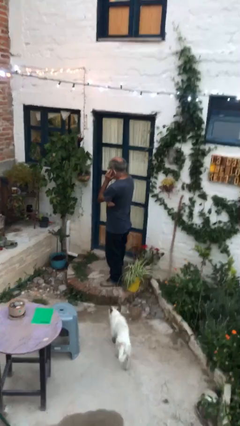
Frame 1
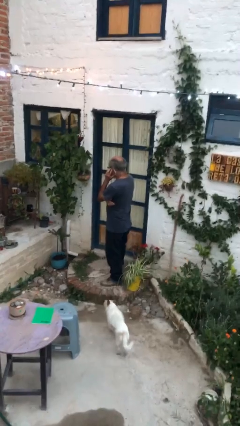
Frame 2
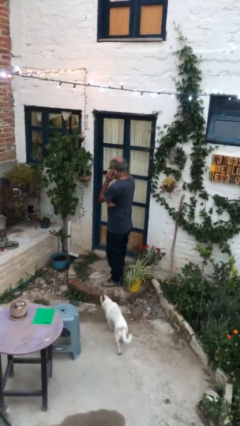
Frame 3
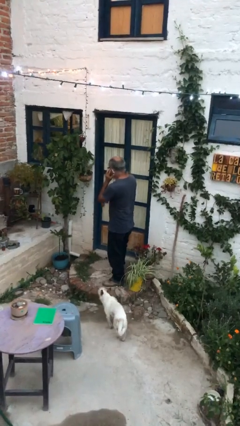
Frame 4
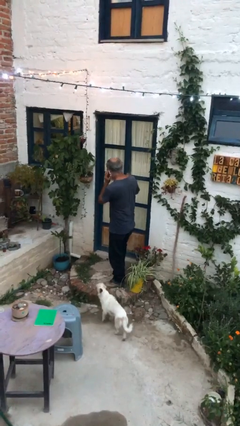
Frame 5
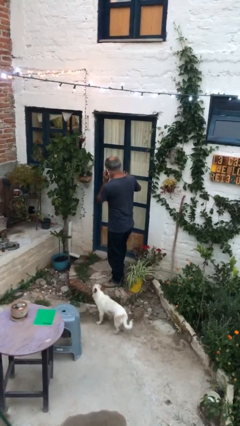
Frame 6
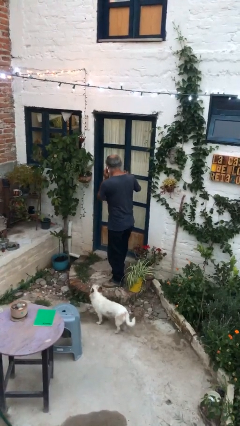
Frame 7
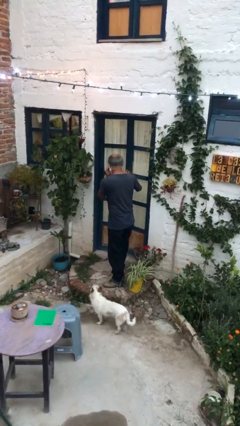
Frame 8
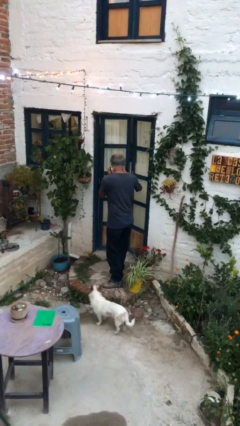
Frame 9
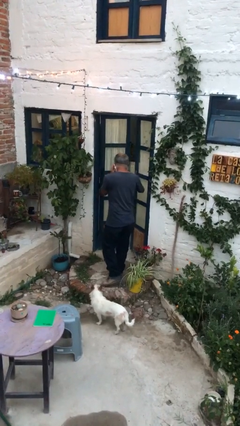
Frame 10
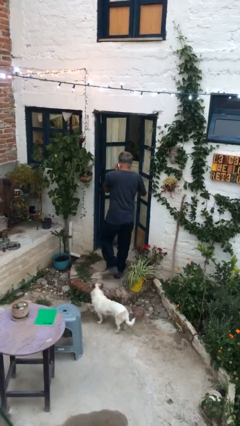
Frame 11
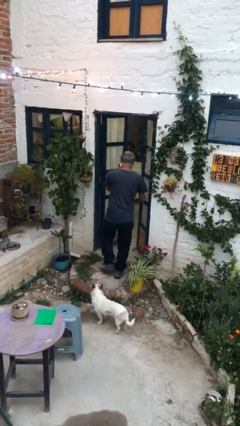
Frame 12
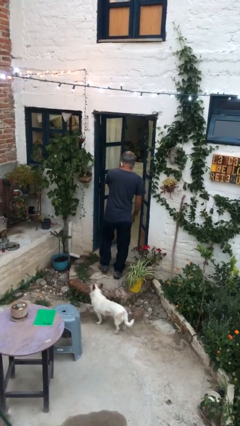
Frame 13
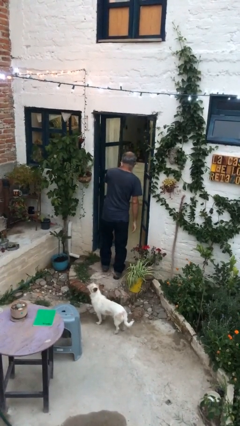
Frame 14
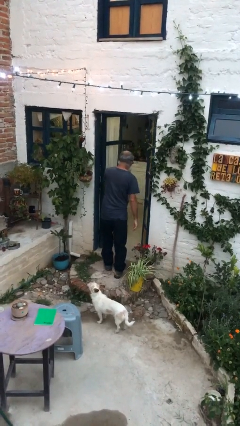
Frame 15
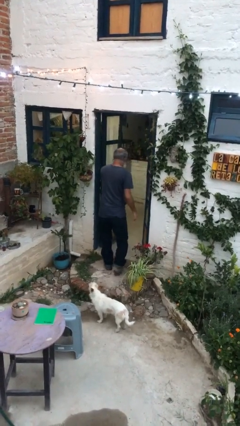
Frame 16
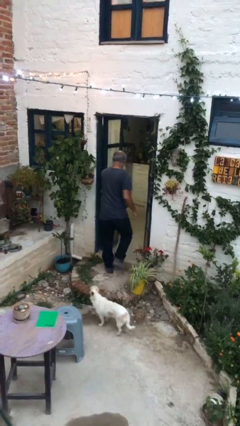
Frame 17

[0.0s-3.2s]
person opens facility door

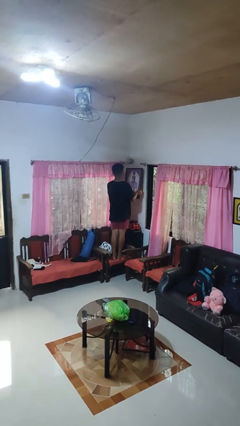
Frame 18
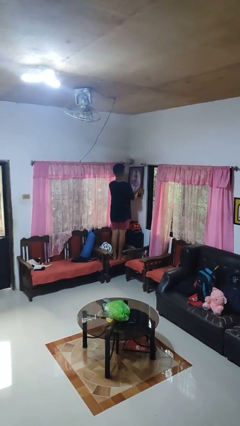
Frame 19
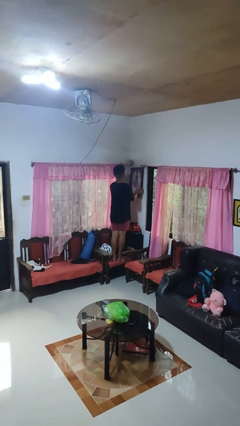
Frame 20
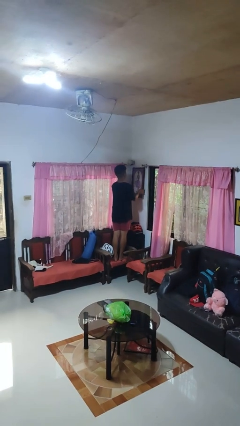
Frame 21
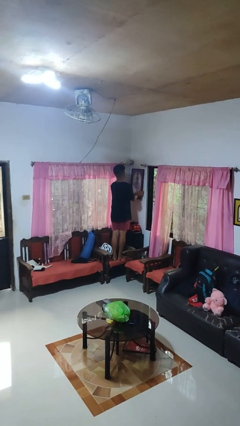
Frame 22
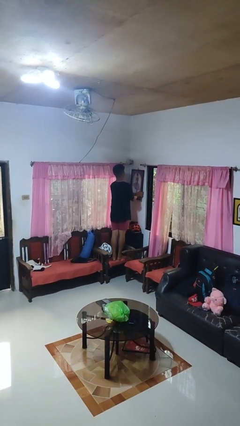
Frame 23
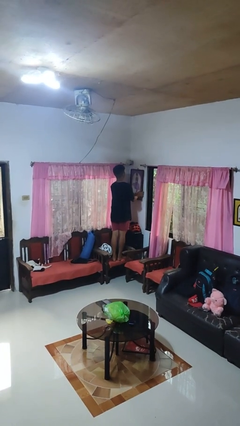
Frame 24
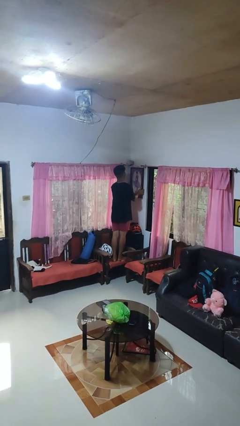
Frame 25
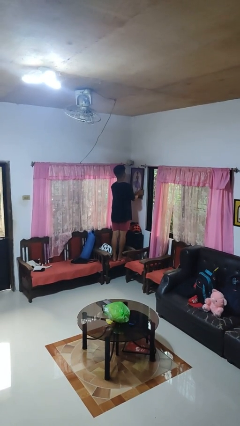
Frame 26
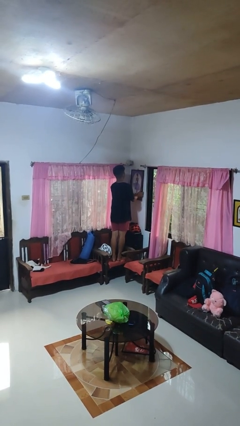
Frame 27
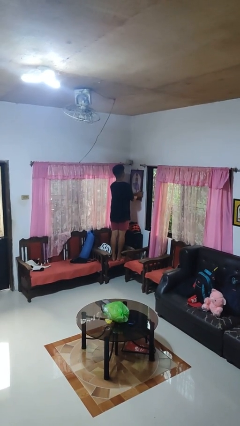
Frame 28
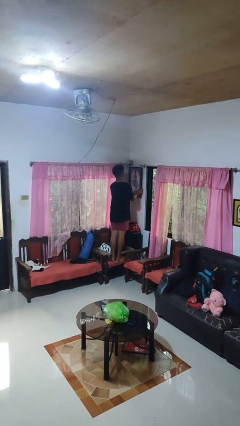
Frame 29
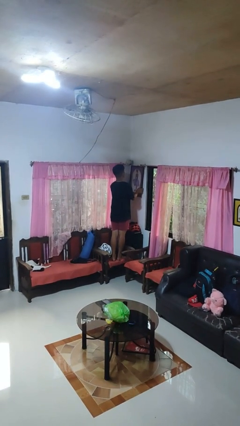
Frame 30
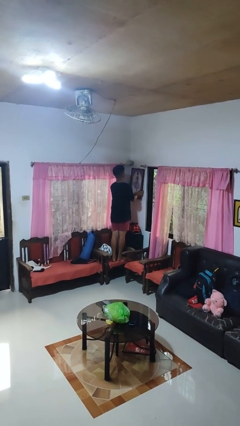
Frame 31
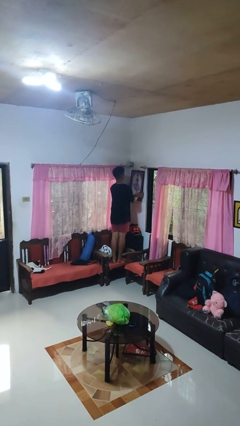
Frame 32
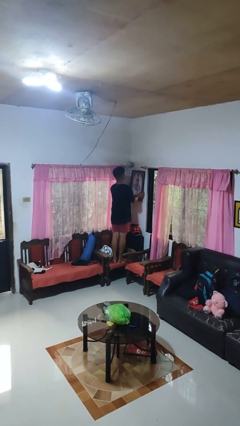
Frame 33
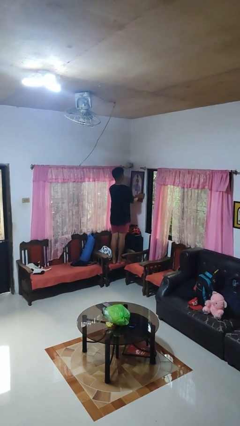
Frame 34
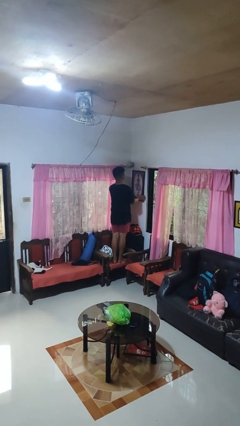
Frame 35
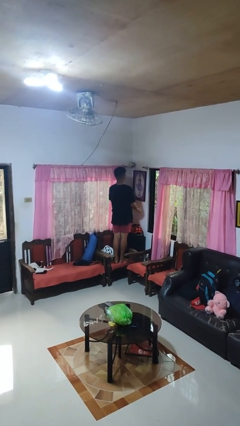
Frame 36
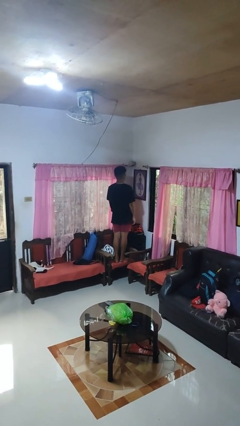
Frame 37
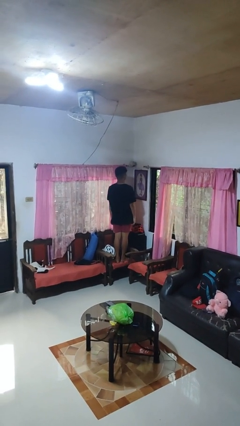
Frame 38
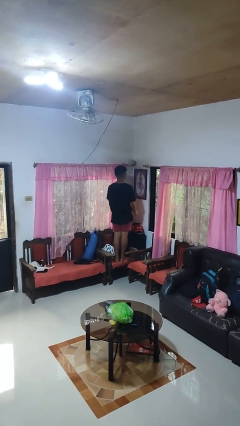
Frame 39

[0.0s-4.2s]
person puts up picture frame

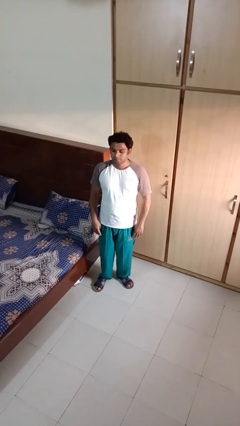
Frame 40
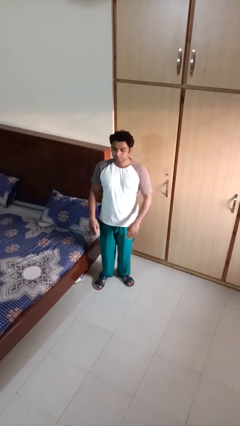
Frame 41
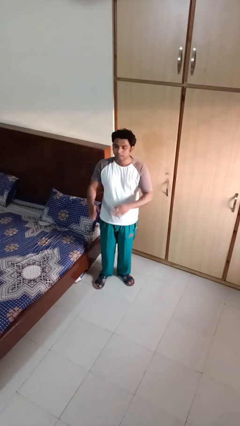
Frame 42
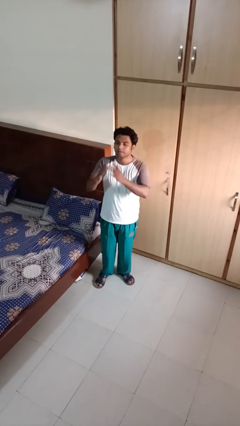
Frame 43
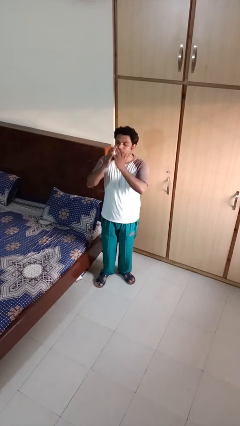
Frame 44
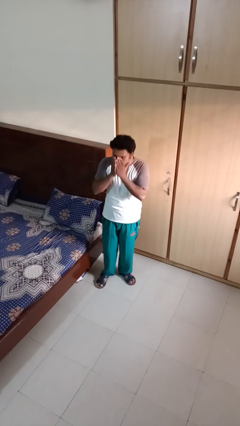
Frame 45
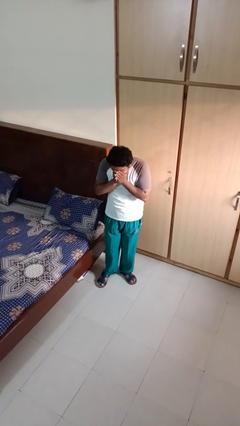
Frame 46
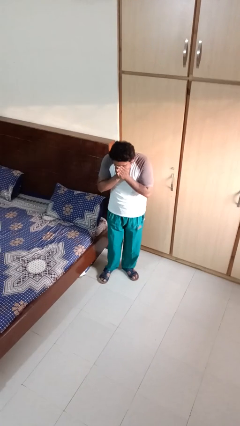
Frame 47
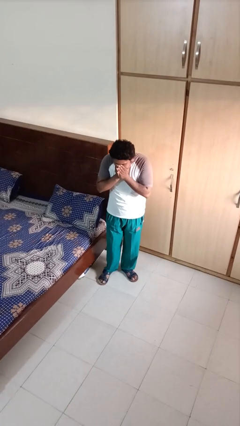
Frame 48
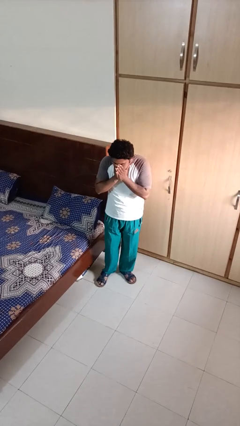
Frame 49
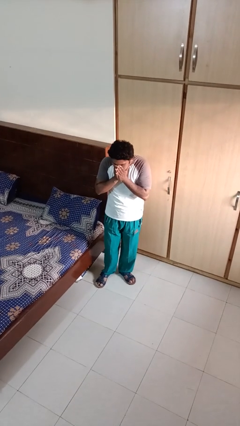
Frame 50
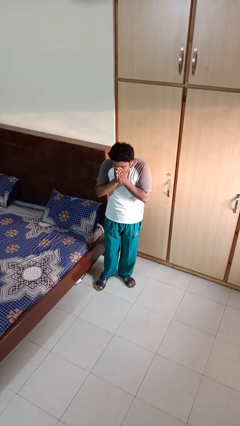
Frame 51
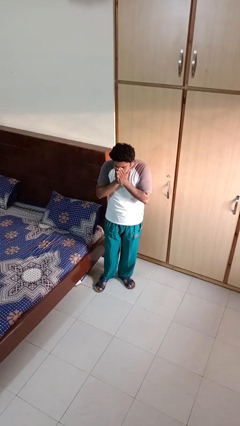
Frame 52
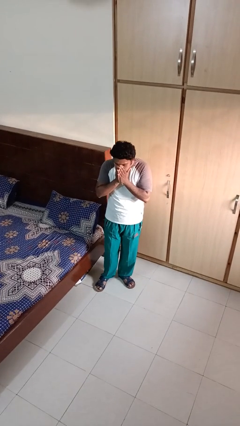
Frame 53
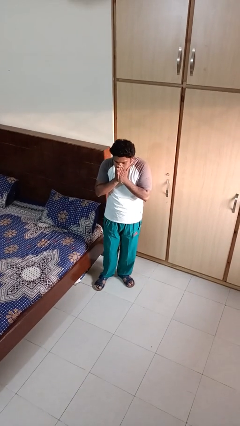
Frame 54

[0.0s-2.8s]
person sneezes into hand

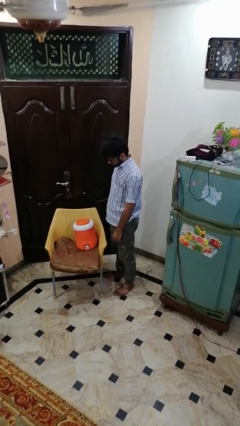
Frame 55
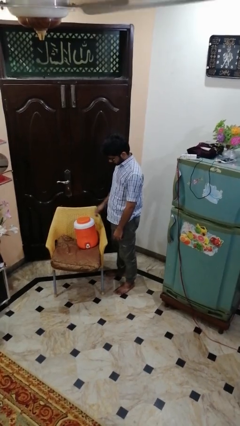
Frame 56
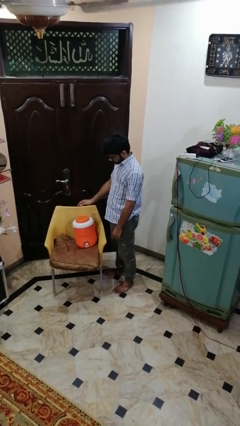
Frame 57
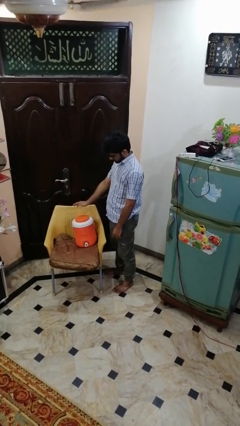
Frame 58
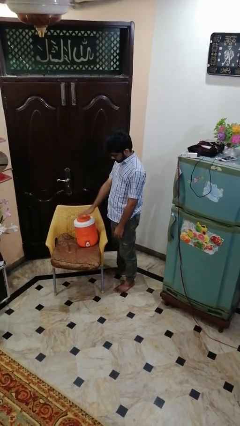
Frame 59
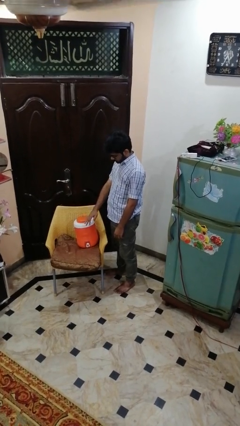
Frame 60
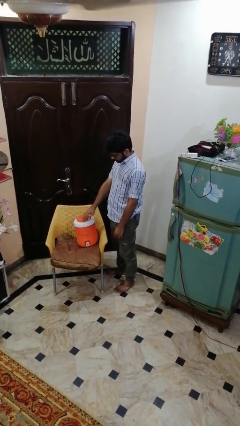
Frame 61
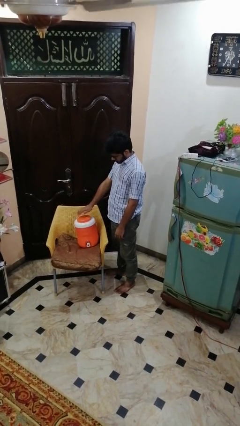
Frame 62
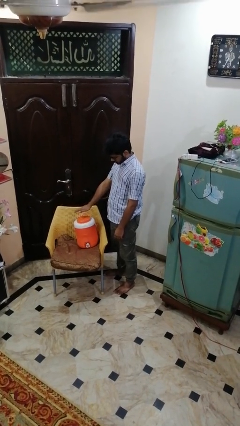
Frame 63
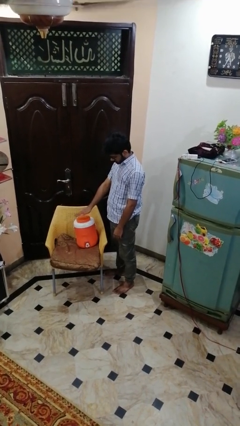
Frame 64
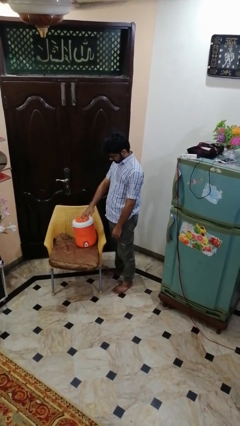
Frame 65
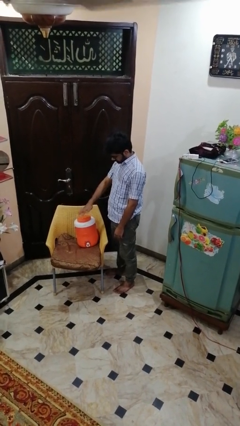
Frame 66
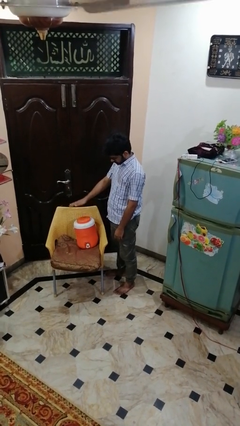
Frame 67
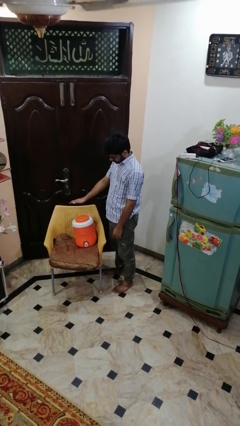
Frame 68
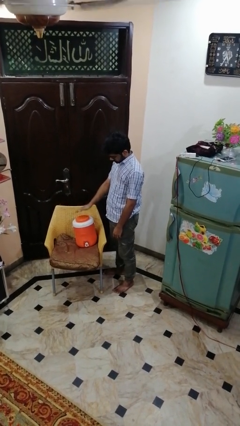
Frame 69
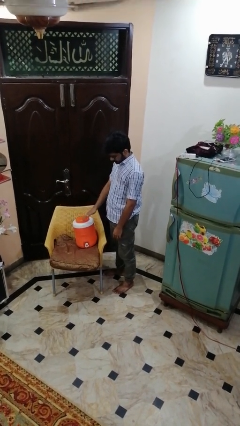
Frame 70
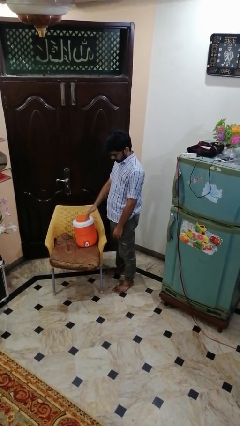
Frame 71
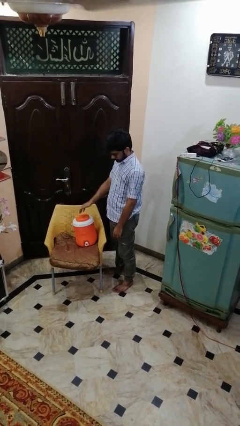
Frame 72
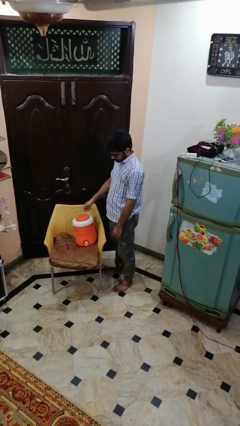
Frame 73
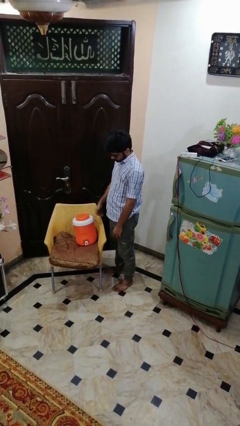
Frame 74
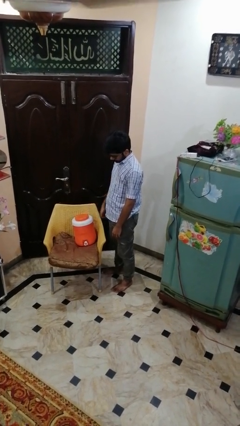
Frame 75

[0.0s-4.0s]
person waves hand over object

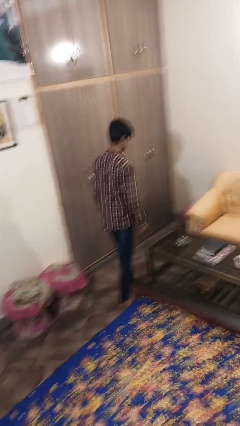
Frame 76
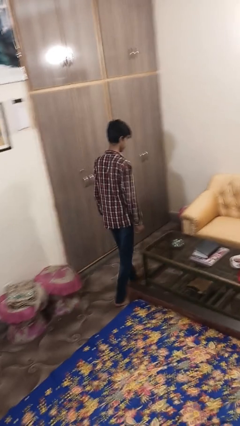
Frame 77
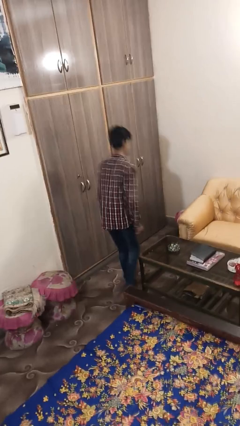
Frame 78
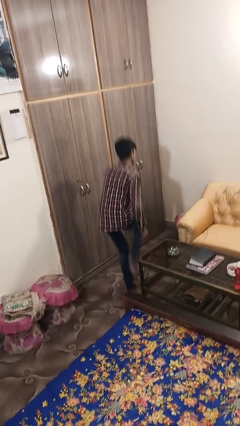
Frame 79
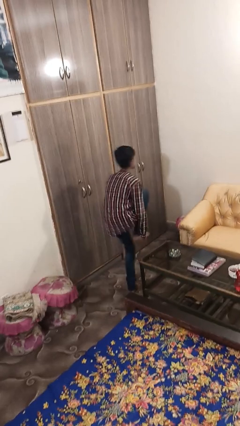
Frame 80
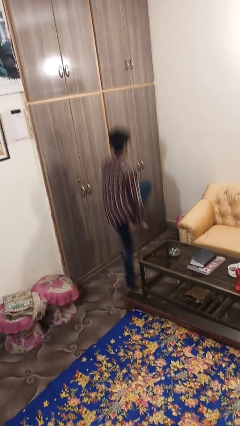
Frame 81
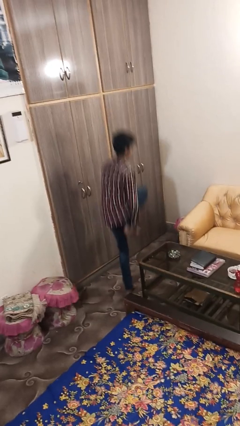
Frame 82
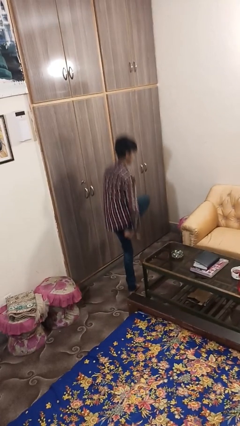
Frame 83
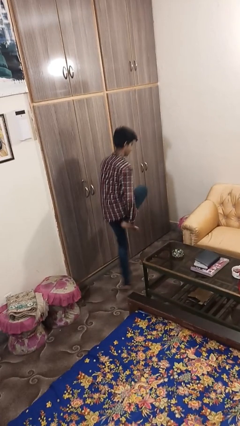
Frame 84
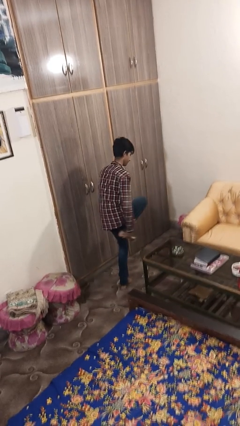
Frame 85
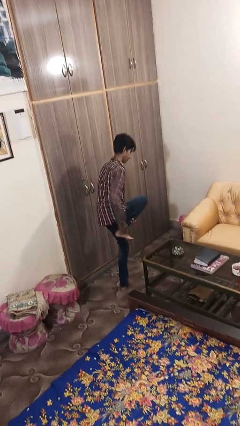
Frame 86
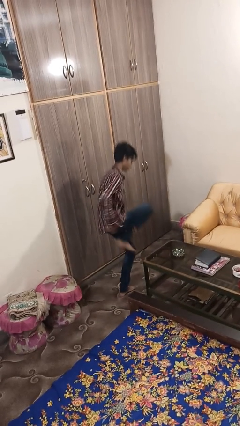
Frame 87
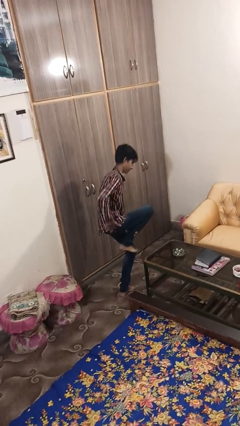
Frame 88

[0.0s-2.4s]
person bumps into table

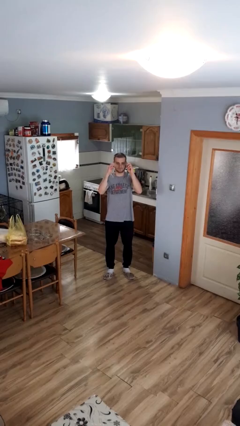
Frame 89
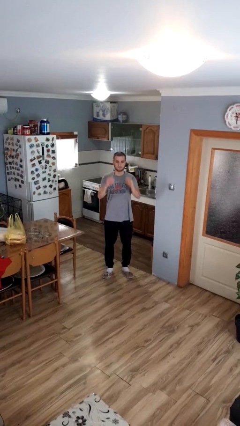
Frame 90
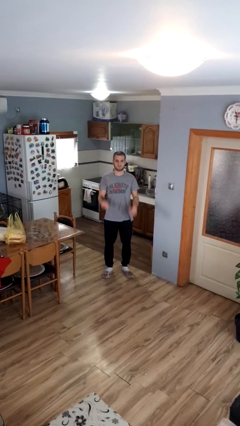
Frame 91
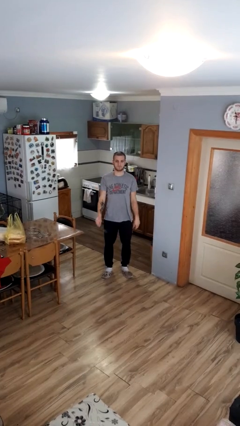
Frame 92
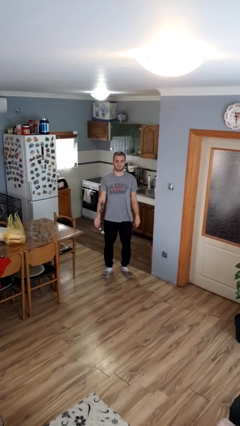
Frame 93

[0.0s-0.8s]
person takes off glasses

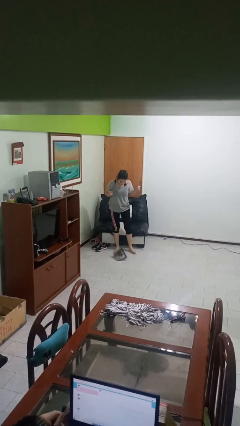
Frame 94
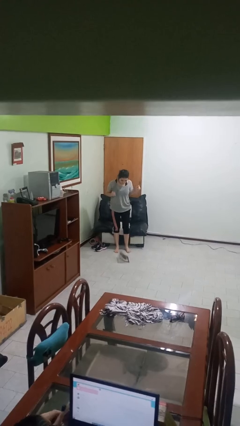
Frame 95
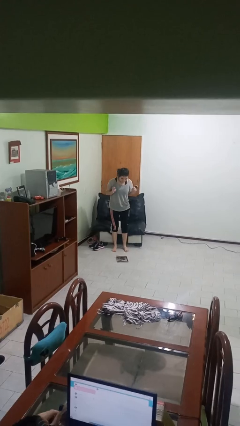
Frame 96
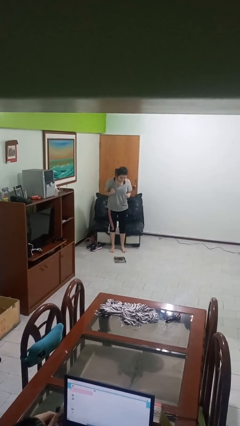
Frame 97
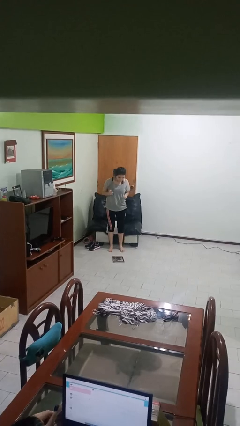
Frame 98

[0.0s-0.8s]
person drops object
